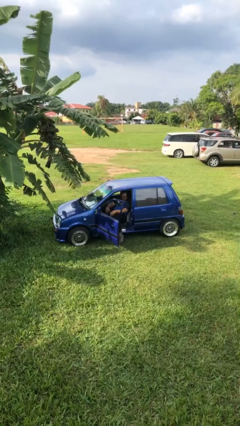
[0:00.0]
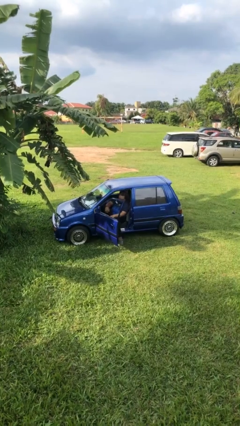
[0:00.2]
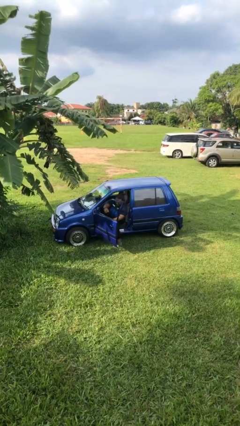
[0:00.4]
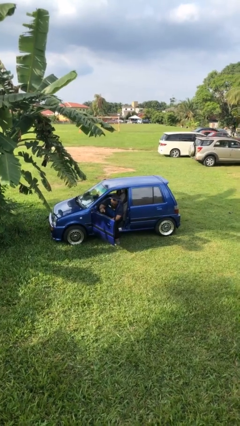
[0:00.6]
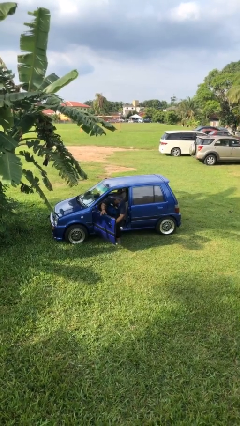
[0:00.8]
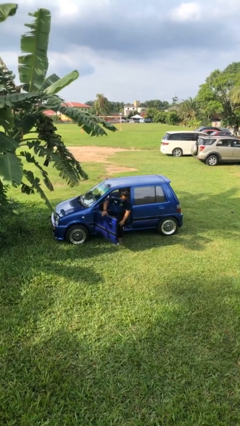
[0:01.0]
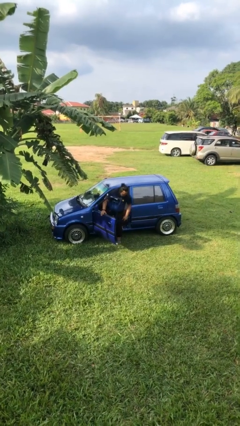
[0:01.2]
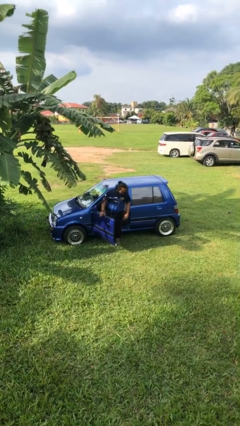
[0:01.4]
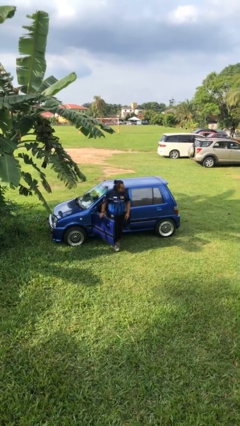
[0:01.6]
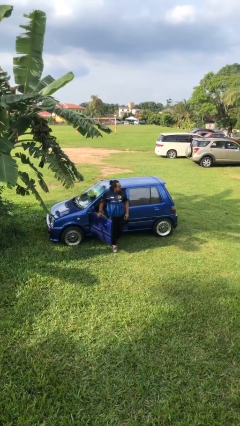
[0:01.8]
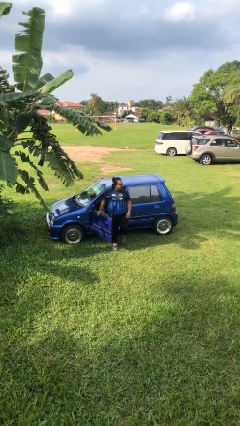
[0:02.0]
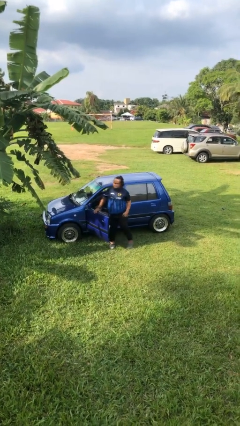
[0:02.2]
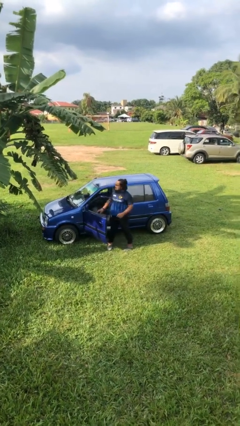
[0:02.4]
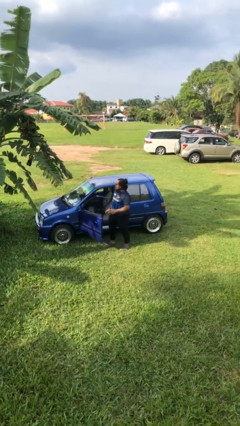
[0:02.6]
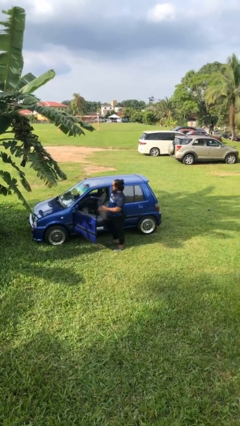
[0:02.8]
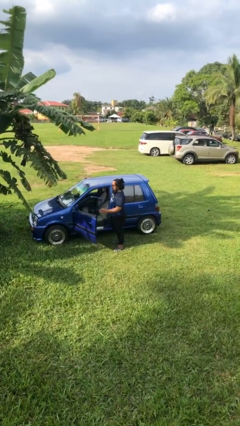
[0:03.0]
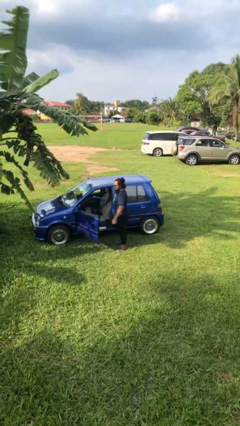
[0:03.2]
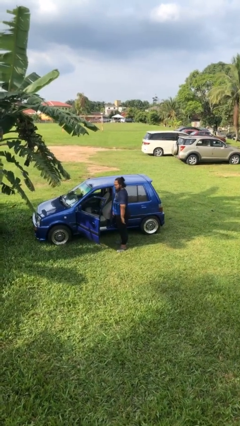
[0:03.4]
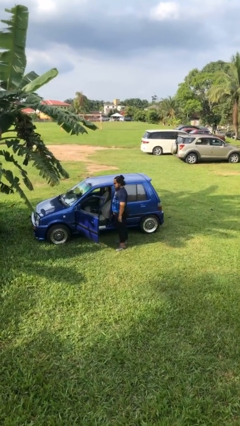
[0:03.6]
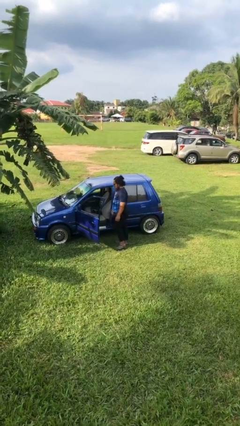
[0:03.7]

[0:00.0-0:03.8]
person exits car

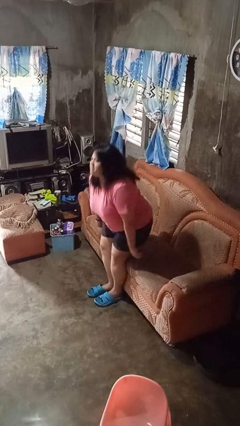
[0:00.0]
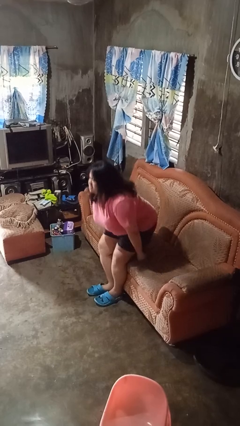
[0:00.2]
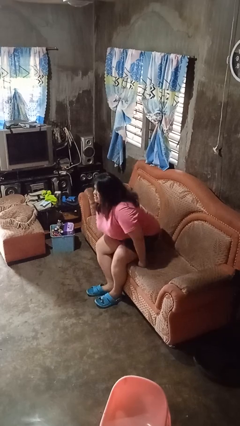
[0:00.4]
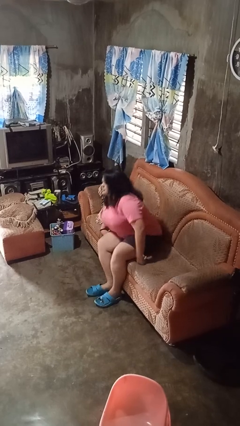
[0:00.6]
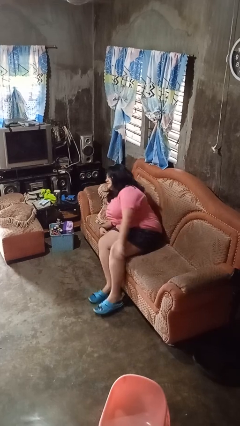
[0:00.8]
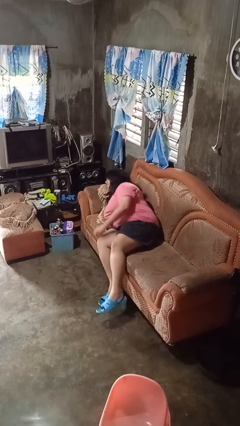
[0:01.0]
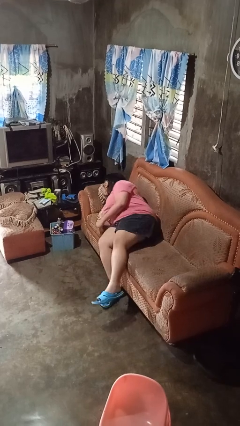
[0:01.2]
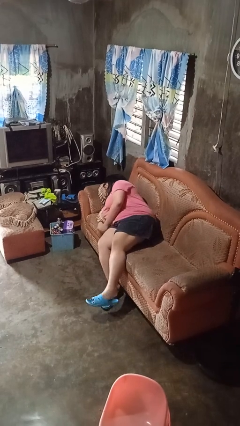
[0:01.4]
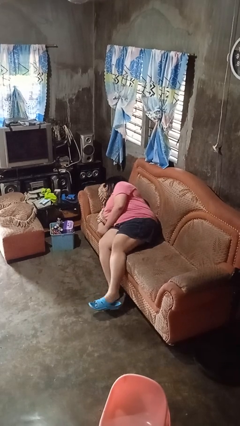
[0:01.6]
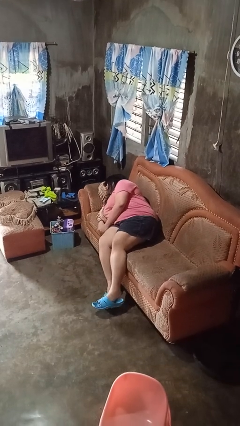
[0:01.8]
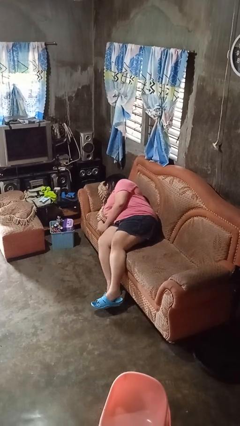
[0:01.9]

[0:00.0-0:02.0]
person lies down on couch

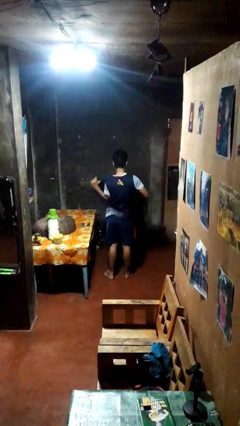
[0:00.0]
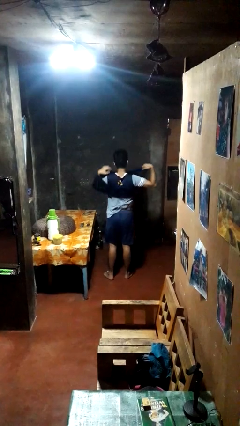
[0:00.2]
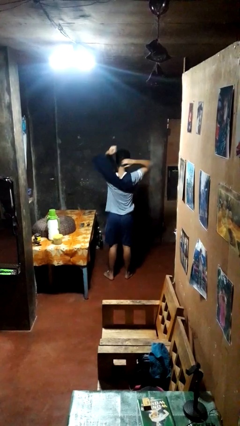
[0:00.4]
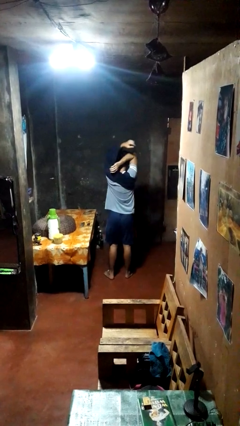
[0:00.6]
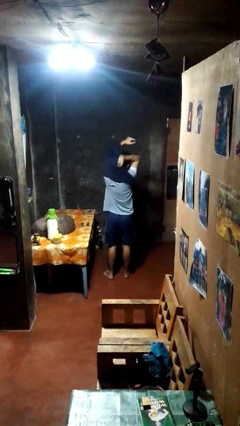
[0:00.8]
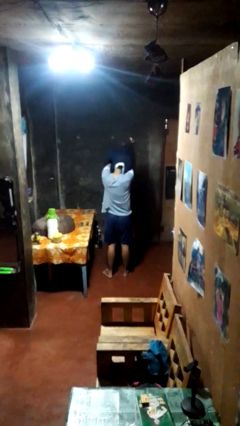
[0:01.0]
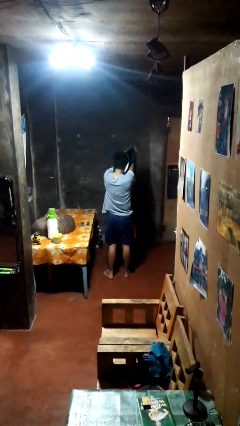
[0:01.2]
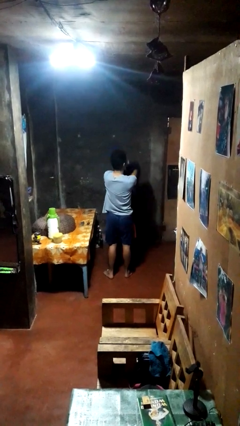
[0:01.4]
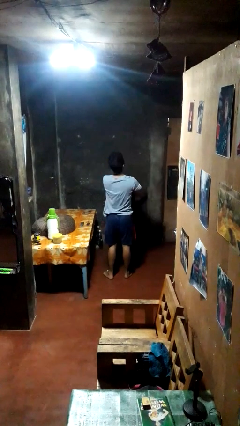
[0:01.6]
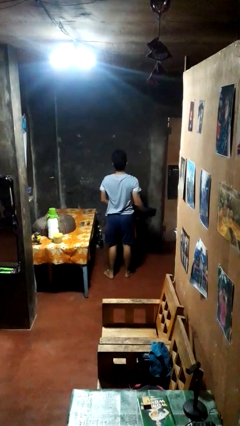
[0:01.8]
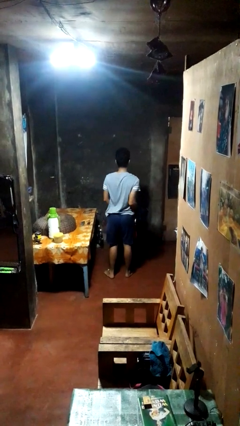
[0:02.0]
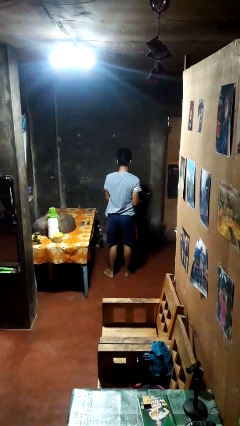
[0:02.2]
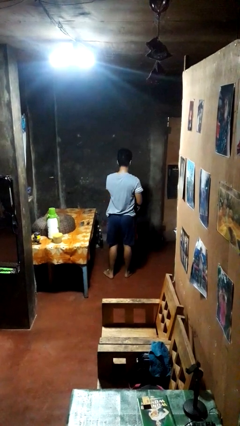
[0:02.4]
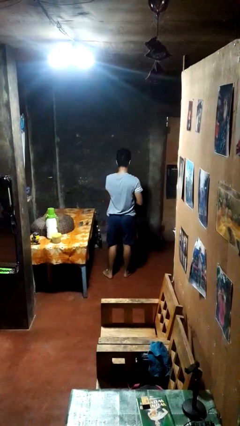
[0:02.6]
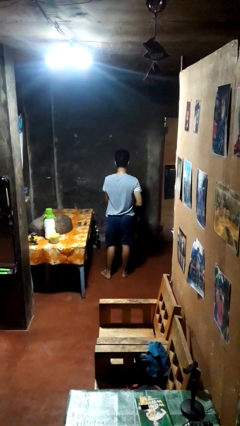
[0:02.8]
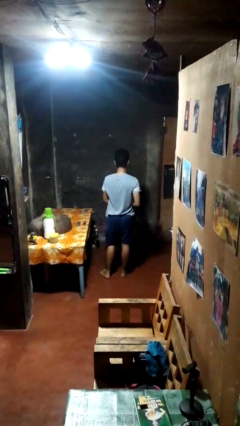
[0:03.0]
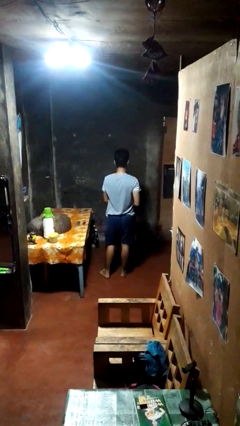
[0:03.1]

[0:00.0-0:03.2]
person takes off shirt

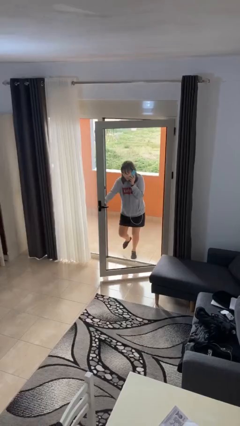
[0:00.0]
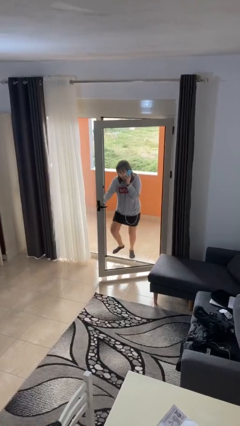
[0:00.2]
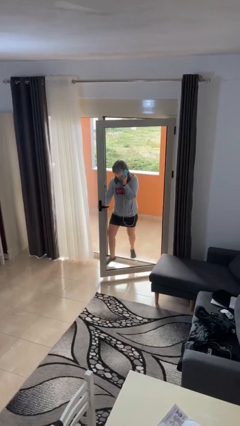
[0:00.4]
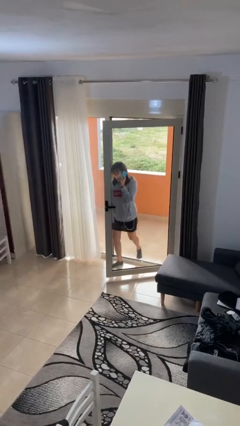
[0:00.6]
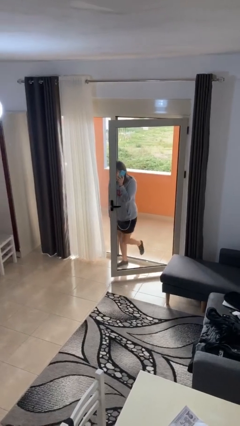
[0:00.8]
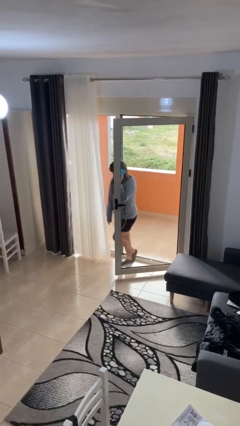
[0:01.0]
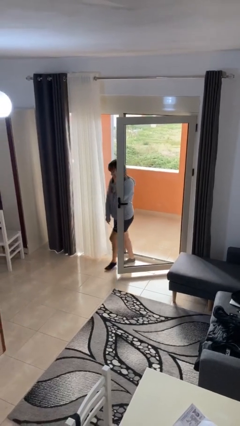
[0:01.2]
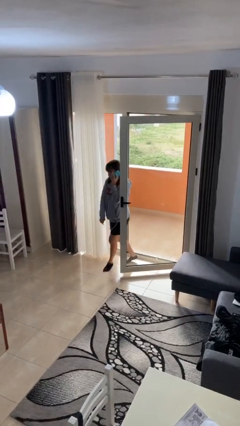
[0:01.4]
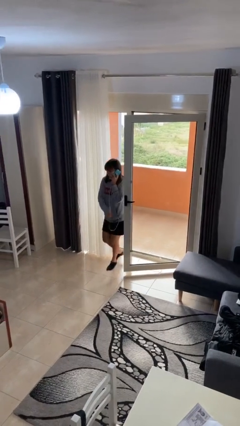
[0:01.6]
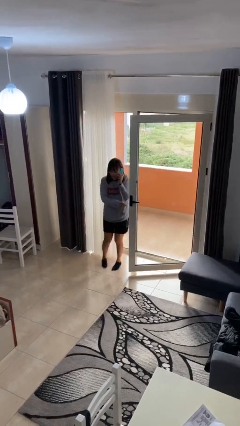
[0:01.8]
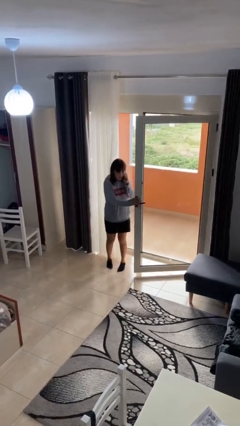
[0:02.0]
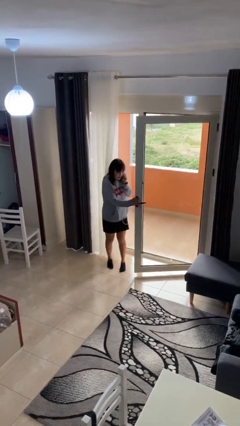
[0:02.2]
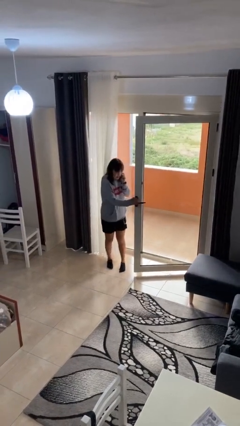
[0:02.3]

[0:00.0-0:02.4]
person enters scene through structure

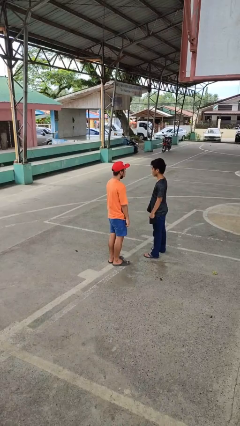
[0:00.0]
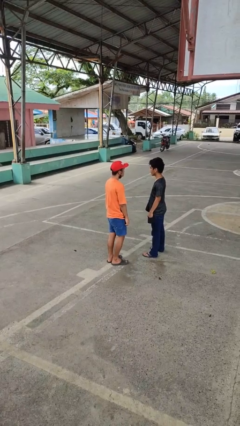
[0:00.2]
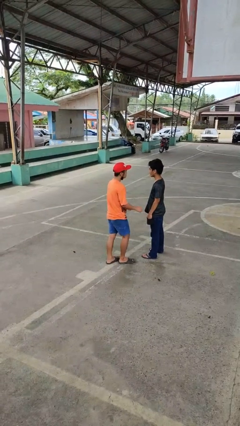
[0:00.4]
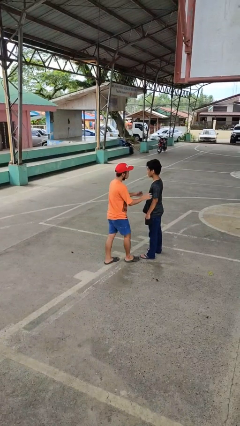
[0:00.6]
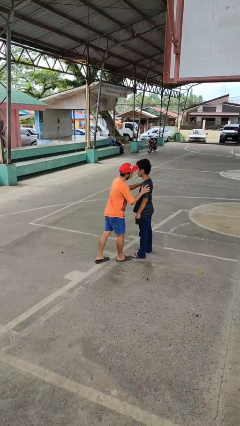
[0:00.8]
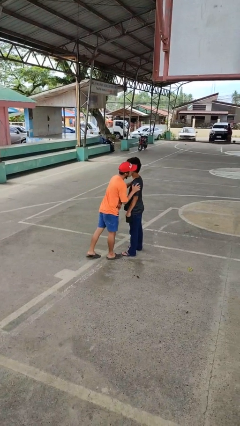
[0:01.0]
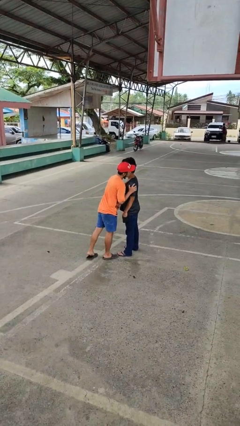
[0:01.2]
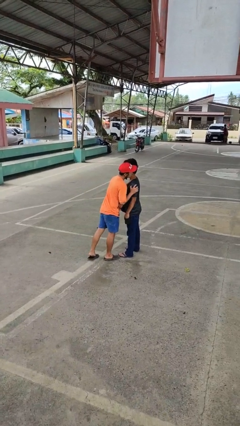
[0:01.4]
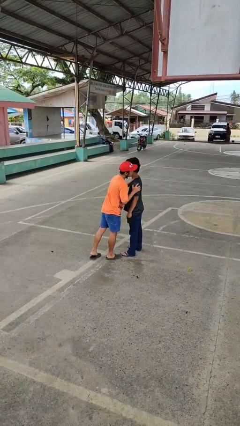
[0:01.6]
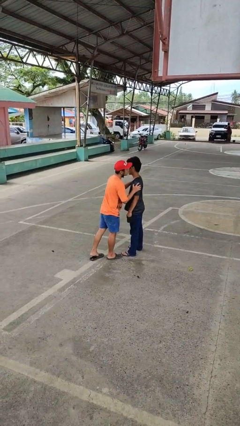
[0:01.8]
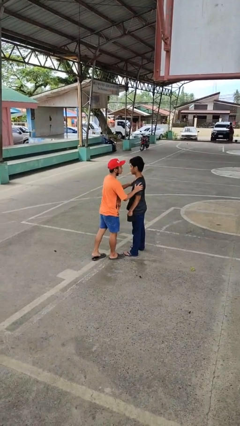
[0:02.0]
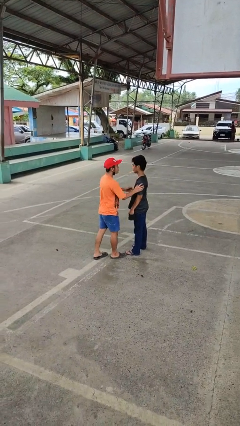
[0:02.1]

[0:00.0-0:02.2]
person kisses cheek of person

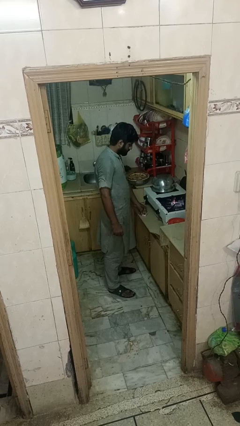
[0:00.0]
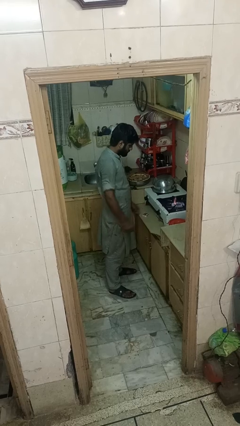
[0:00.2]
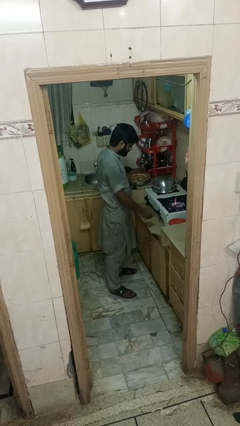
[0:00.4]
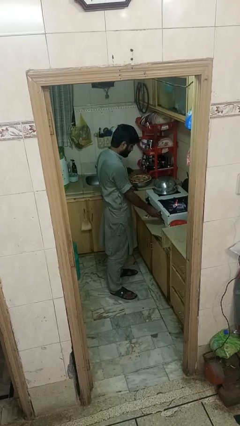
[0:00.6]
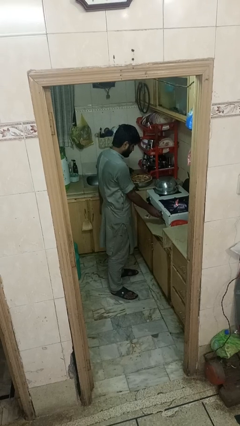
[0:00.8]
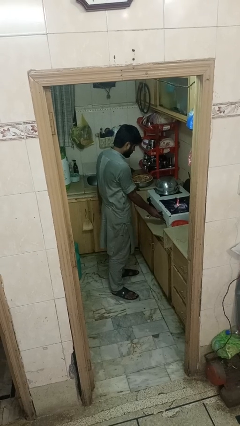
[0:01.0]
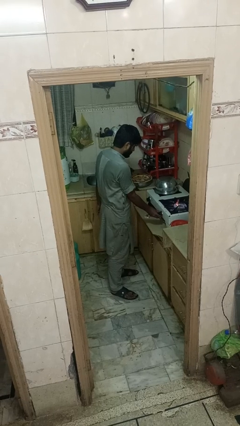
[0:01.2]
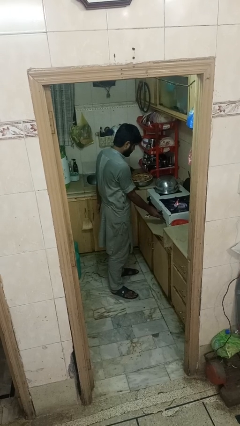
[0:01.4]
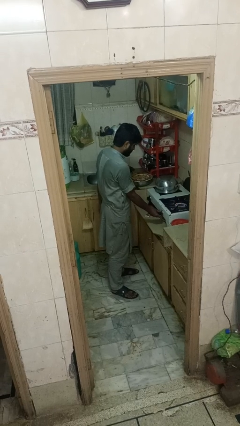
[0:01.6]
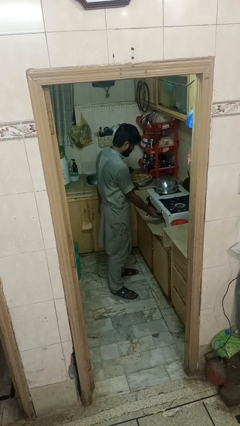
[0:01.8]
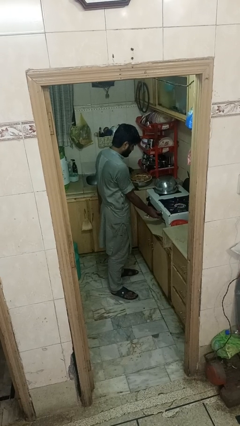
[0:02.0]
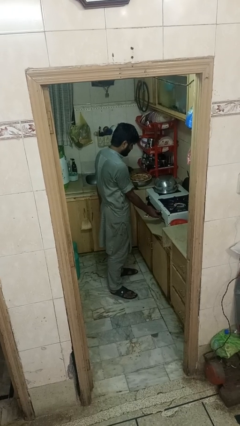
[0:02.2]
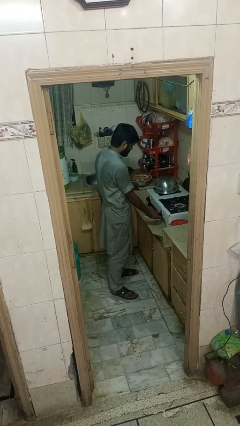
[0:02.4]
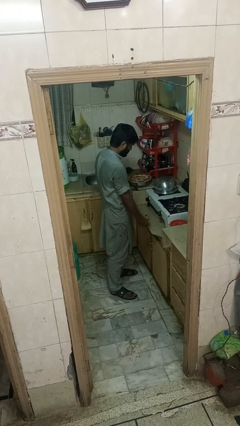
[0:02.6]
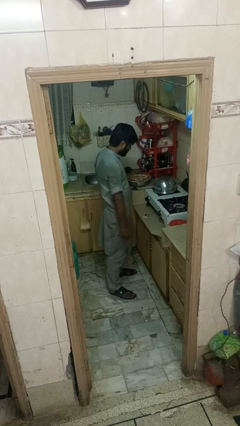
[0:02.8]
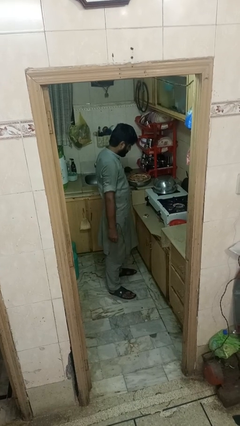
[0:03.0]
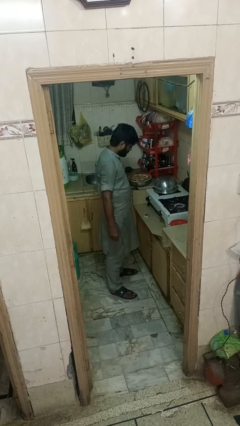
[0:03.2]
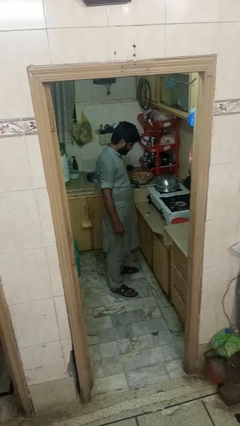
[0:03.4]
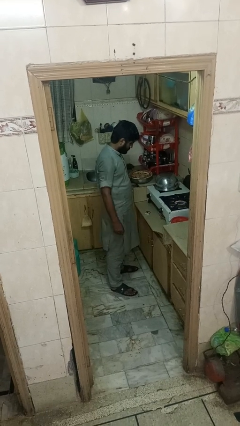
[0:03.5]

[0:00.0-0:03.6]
person turns off stovetop

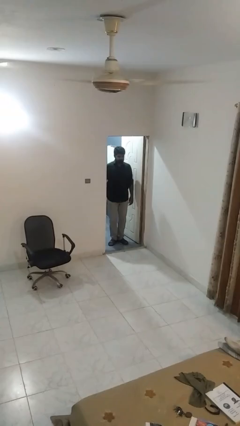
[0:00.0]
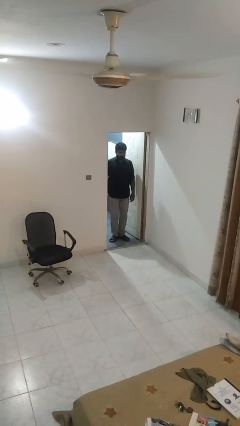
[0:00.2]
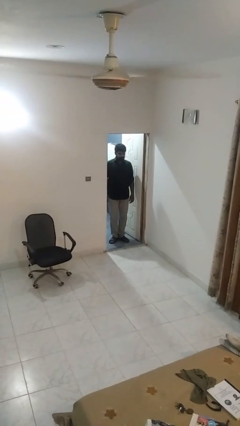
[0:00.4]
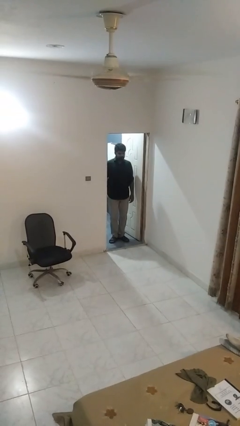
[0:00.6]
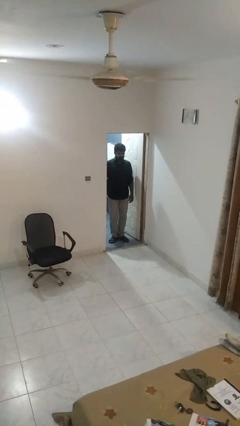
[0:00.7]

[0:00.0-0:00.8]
person bumps into wall
